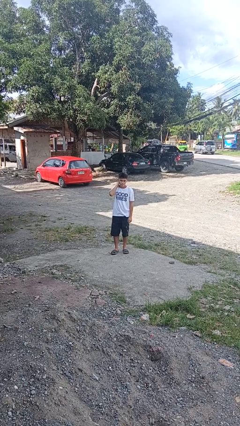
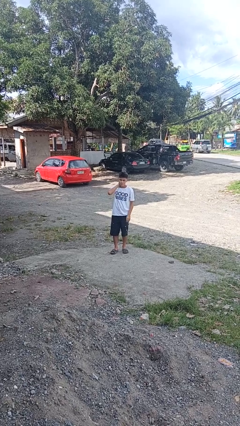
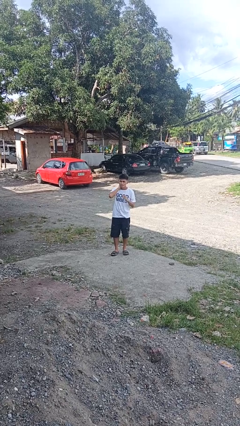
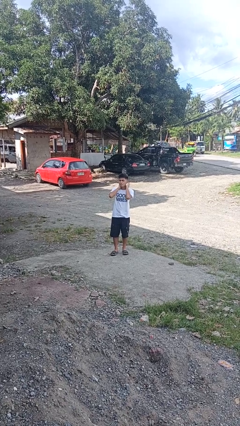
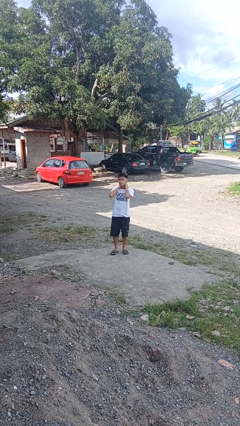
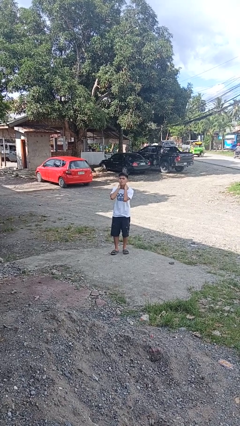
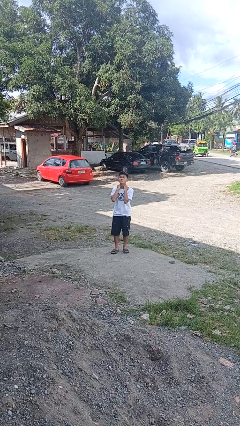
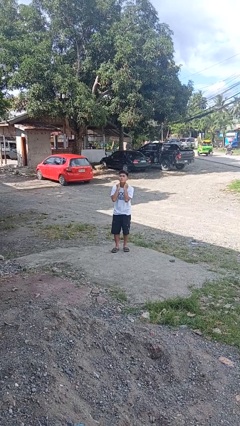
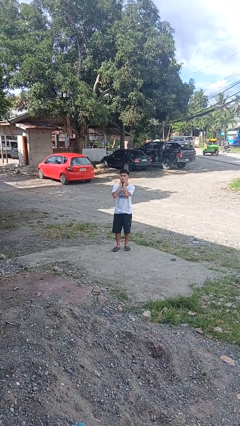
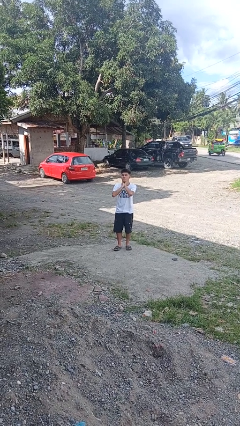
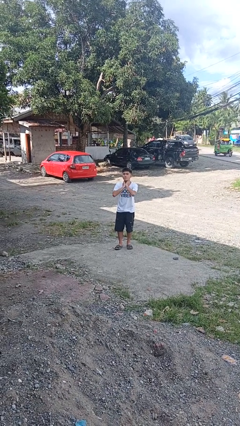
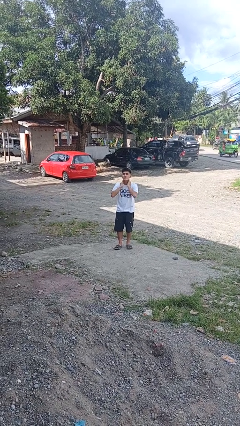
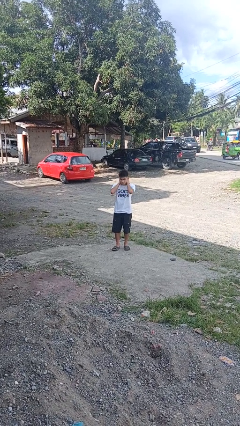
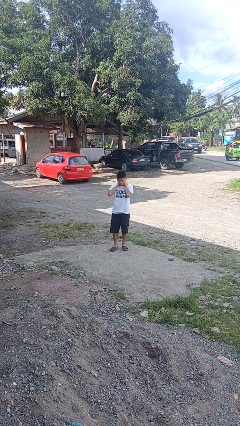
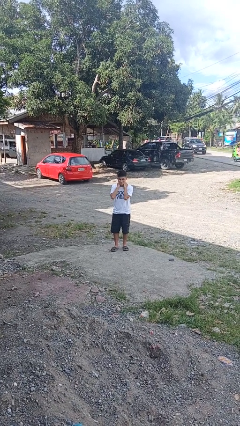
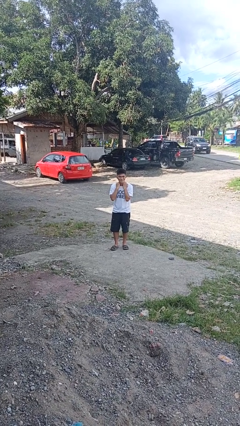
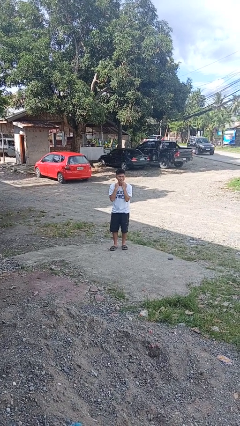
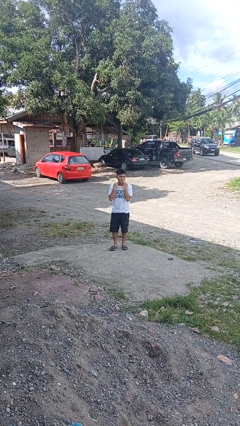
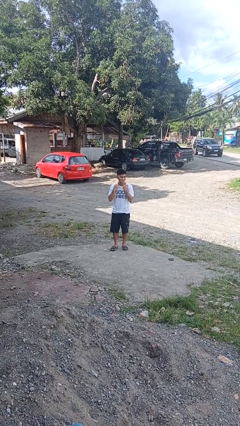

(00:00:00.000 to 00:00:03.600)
person rubs neck

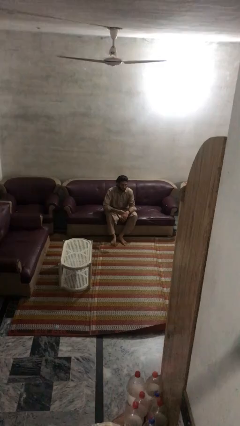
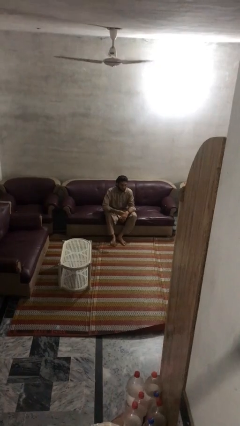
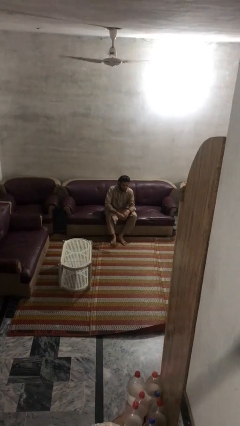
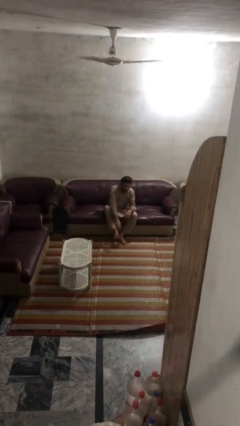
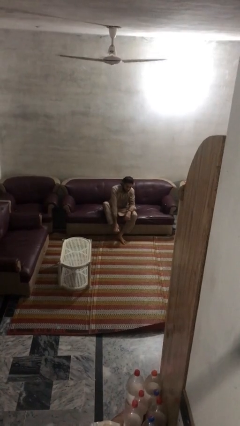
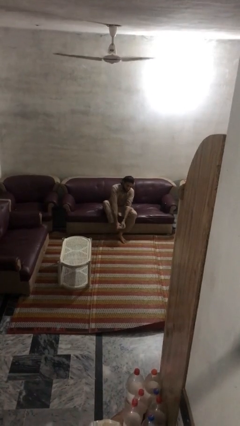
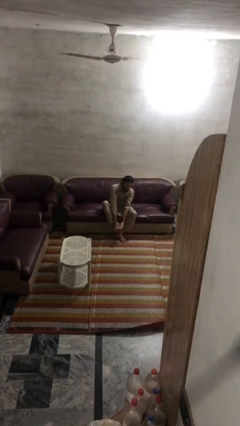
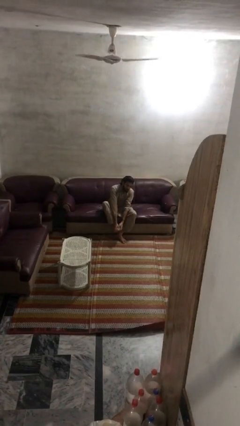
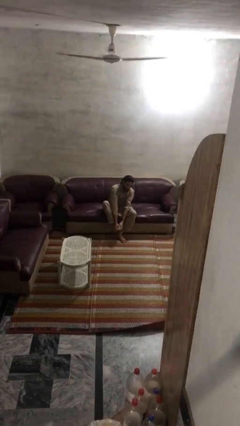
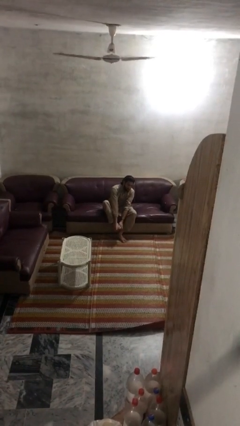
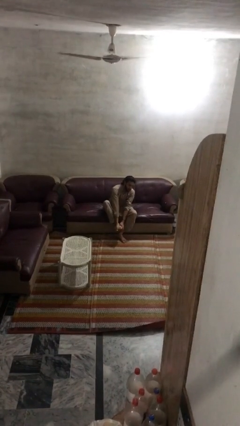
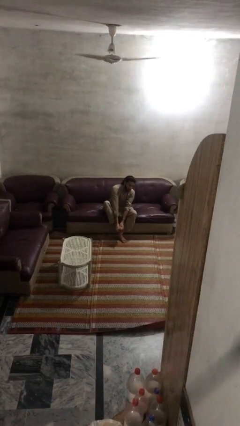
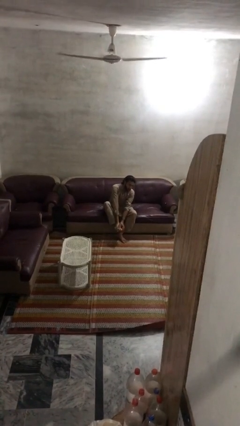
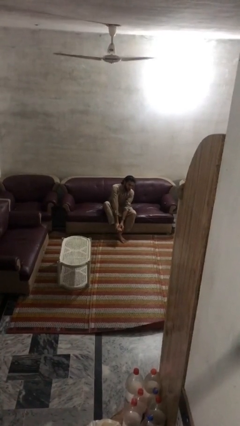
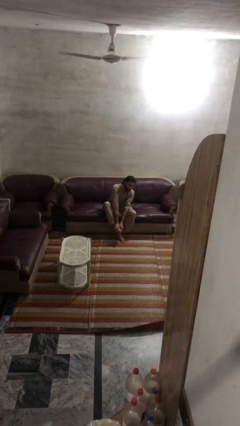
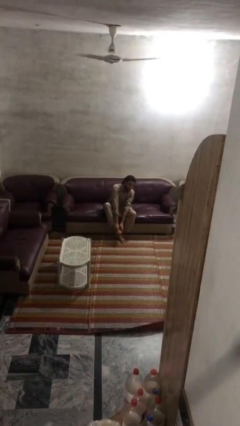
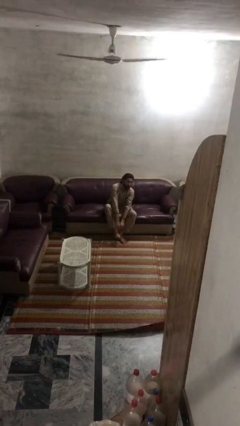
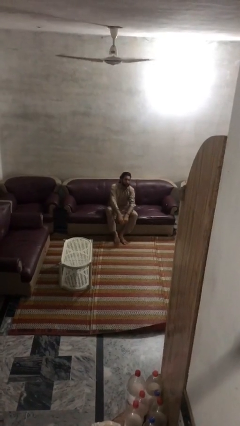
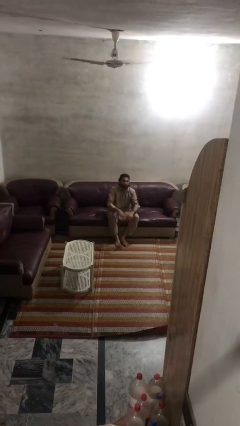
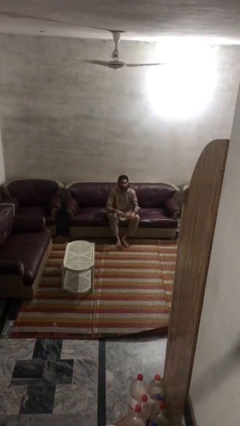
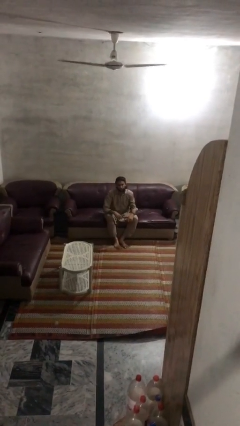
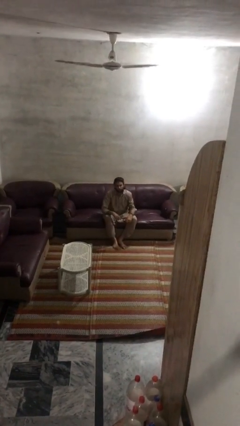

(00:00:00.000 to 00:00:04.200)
person rubs foot

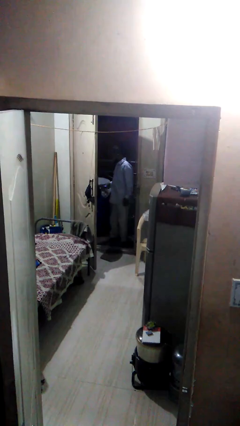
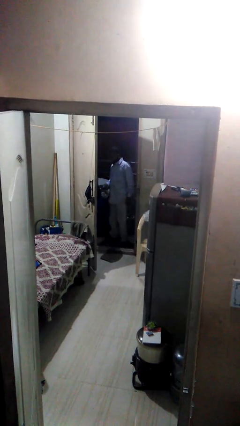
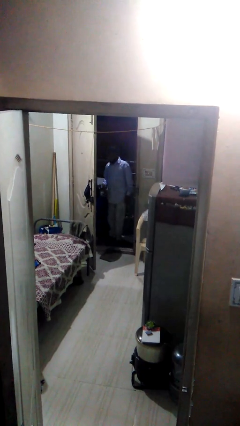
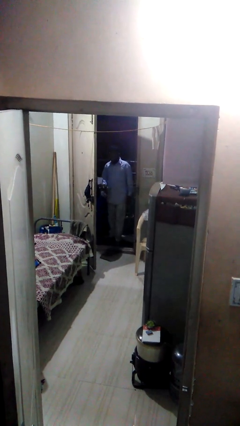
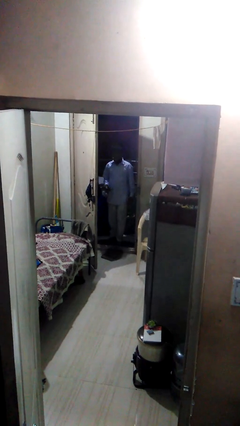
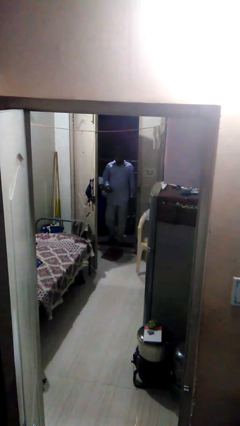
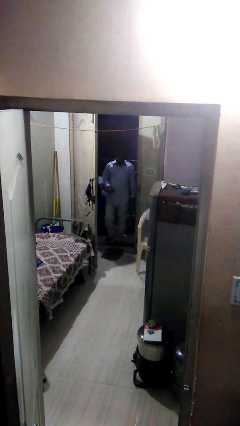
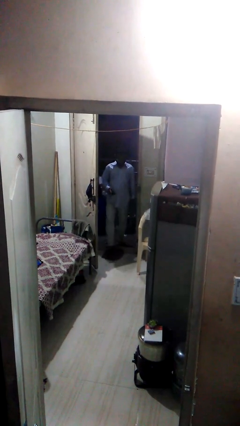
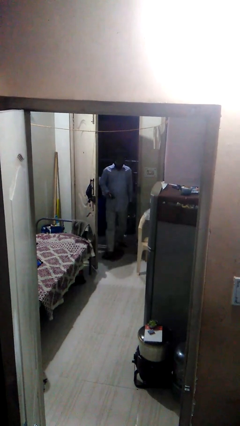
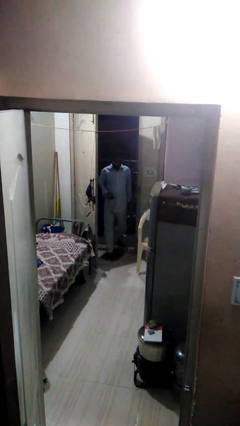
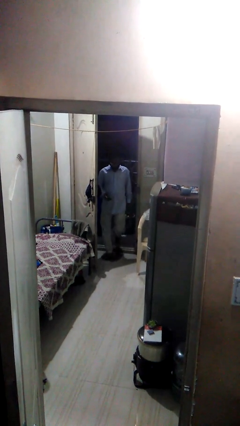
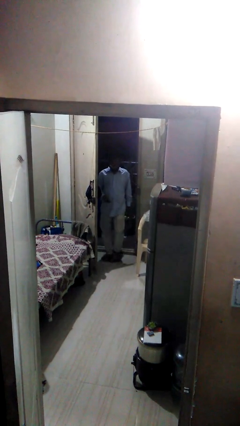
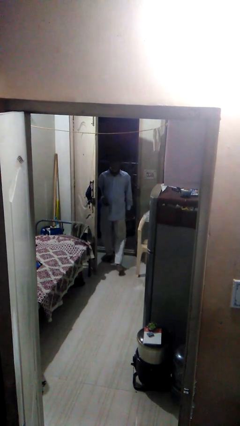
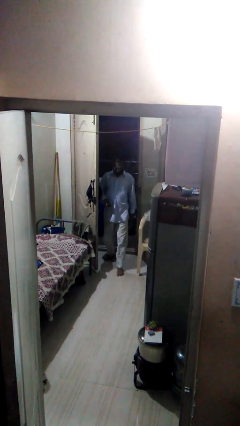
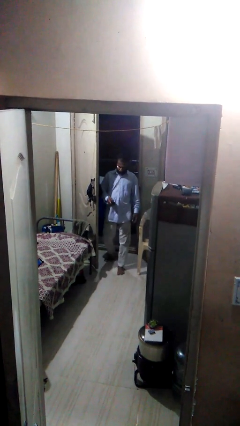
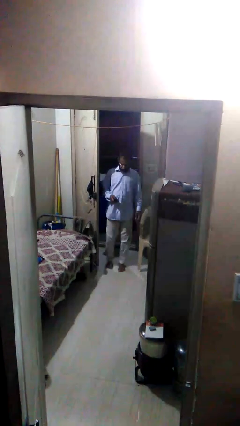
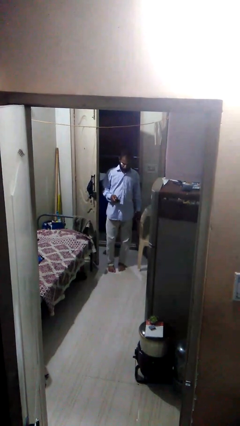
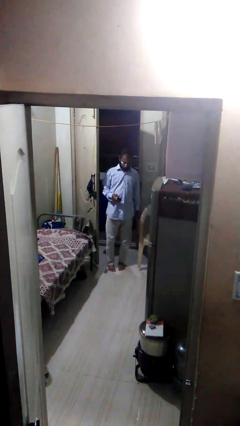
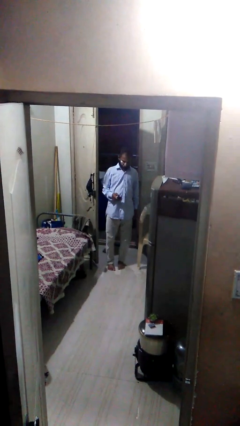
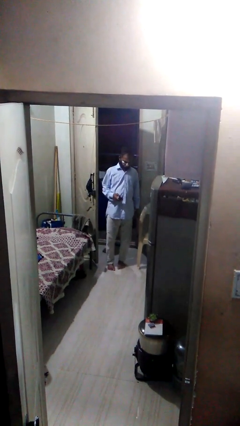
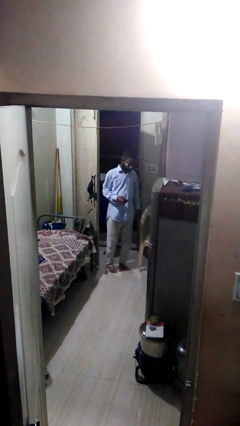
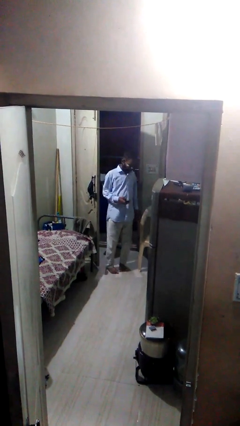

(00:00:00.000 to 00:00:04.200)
person enters scene through structure

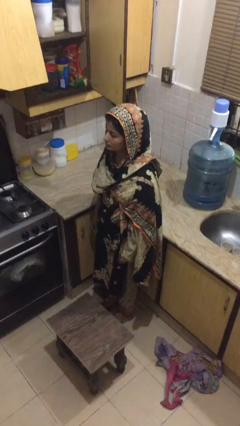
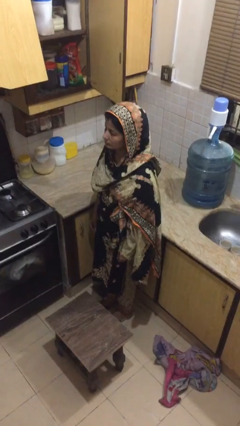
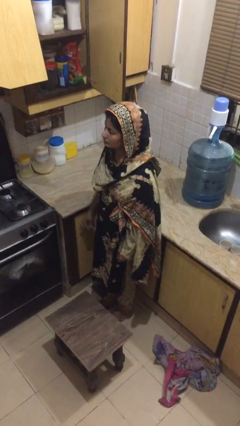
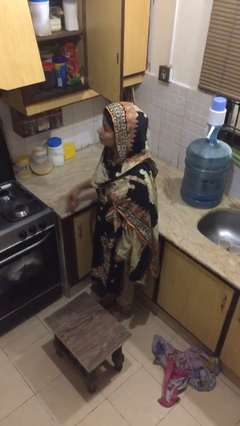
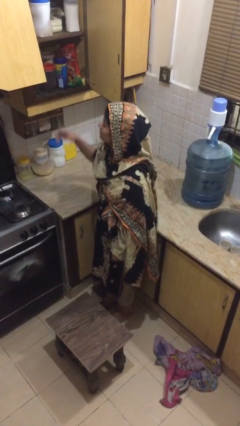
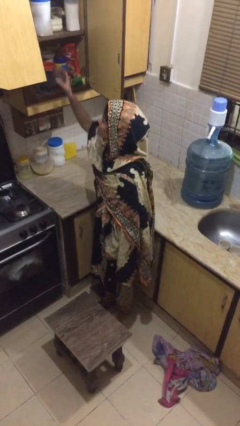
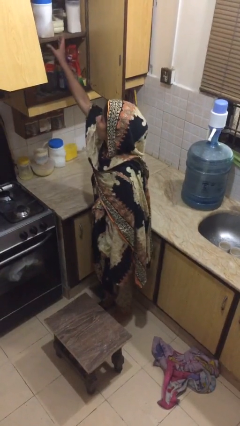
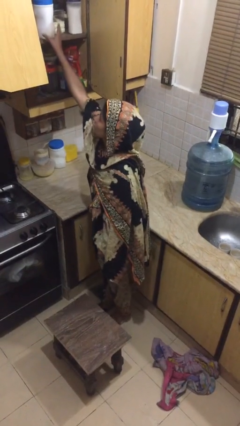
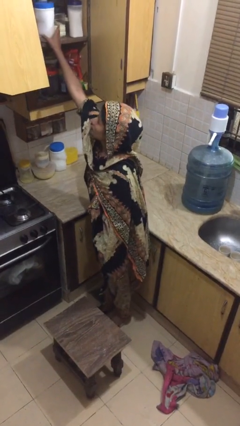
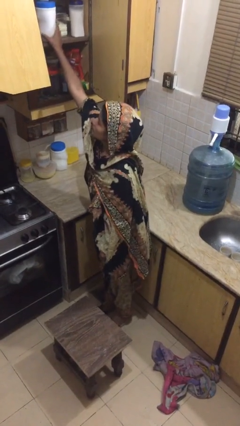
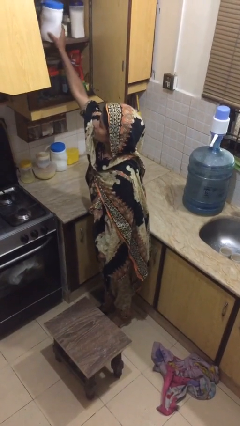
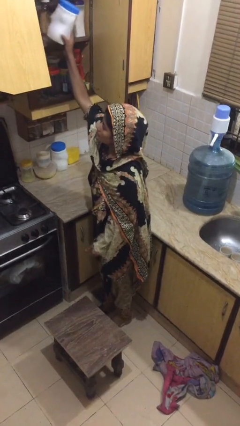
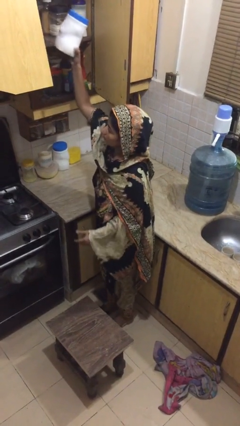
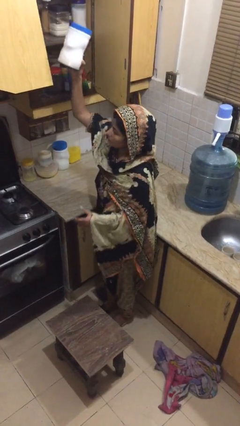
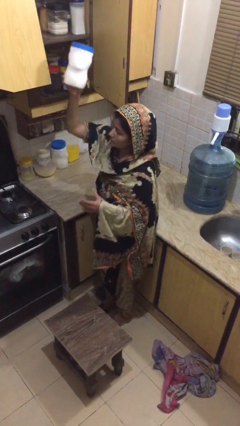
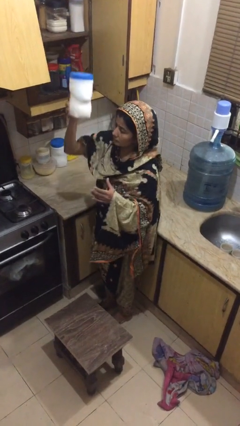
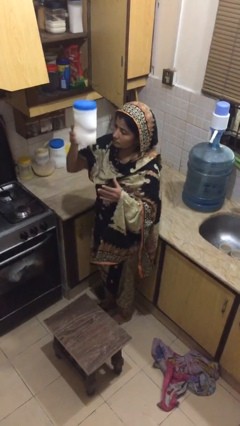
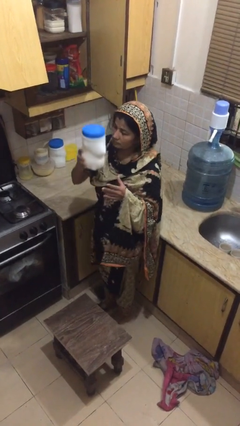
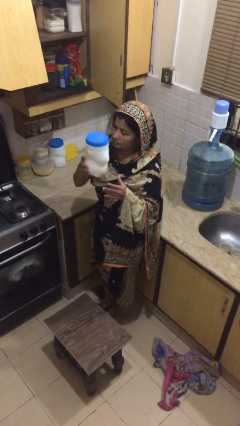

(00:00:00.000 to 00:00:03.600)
person picks up object from shelf

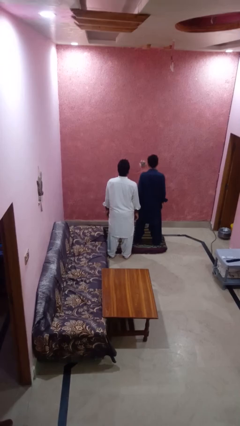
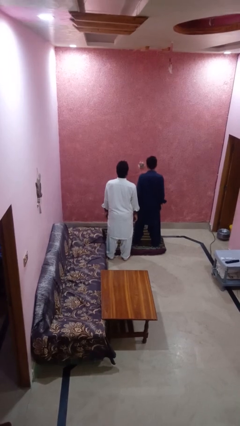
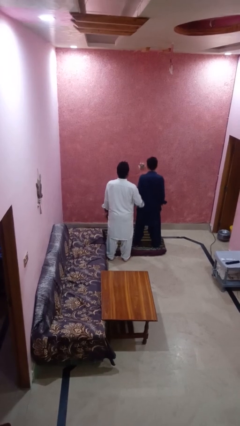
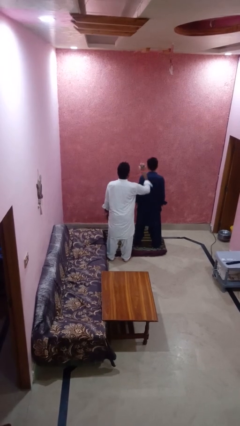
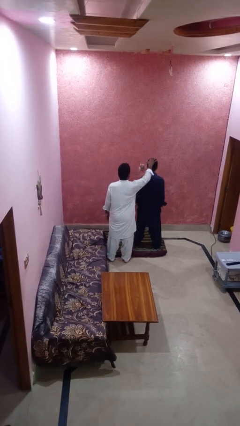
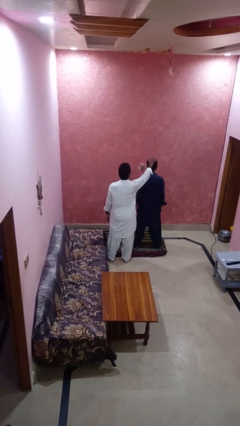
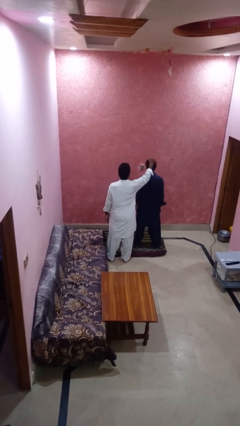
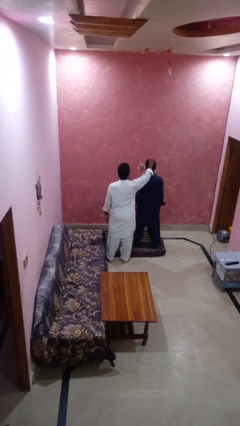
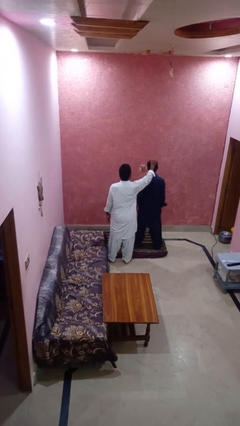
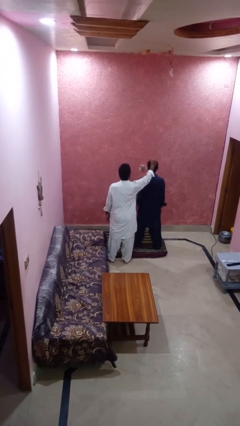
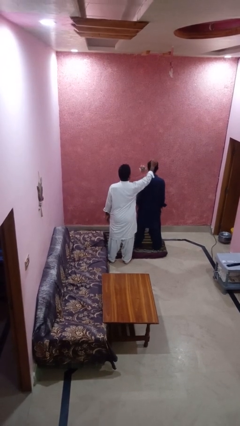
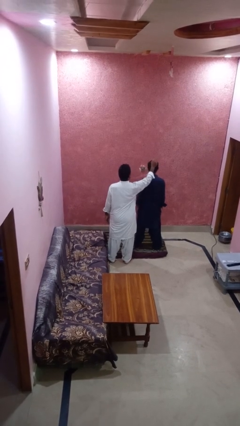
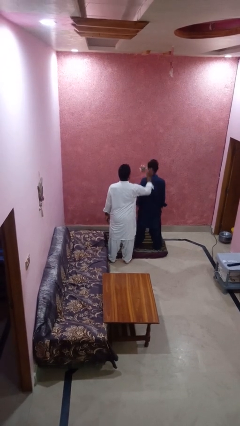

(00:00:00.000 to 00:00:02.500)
person grabs person by hair
